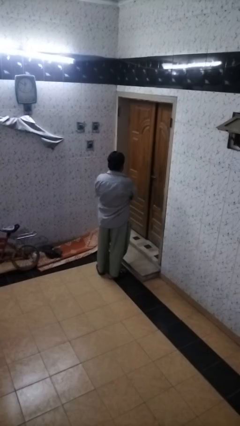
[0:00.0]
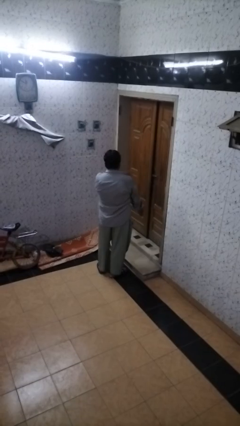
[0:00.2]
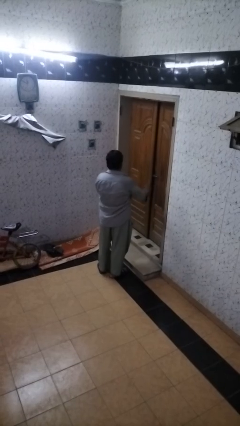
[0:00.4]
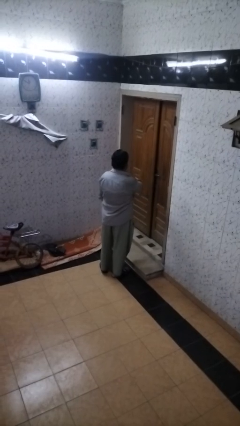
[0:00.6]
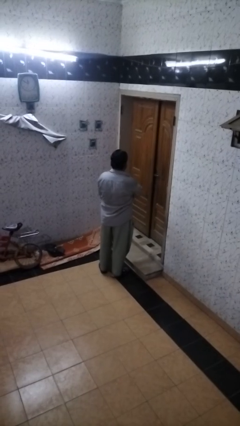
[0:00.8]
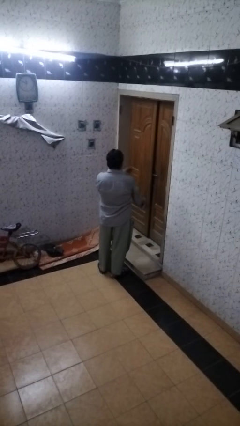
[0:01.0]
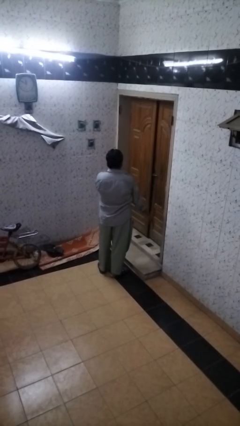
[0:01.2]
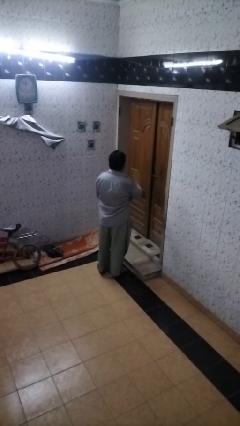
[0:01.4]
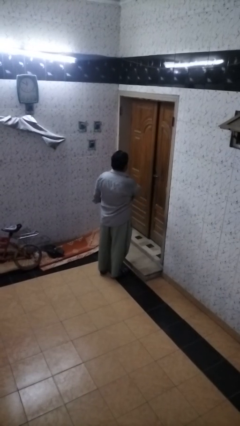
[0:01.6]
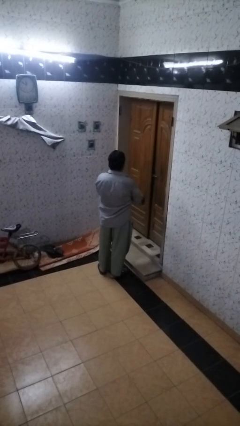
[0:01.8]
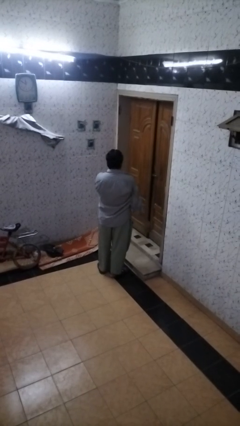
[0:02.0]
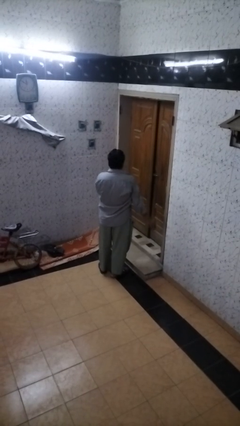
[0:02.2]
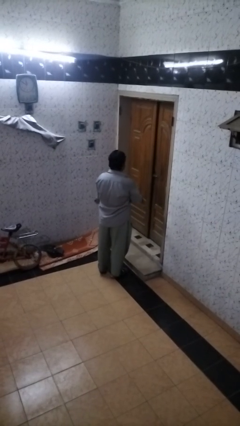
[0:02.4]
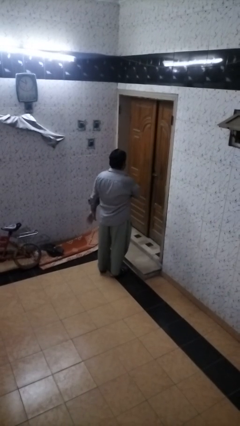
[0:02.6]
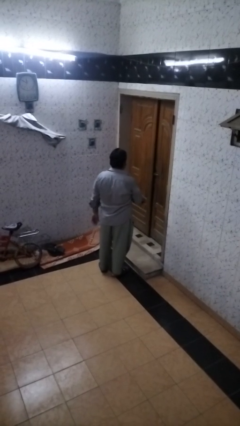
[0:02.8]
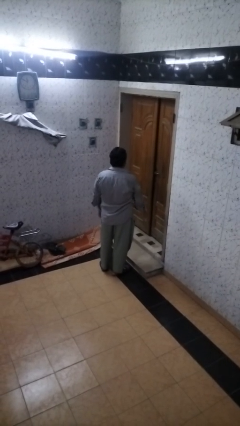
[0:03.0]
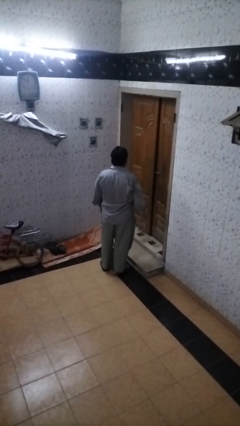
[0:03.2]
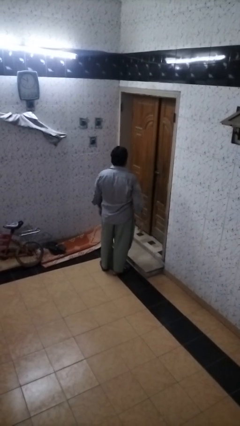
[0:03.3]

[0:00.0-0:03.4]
person drums on chest

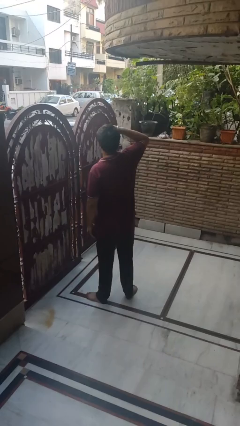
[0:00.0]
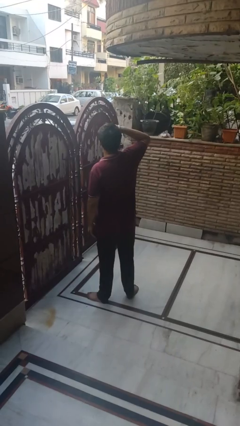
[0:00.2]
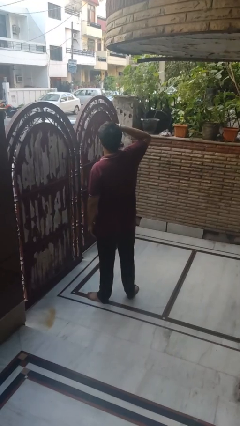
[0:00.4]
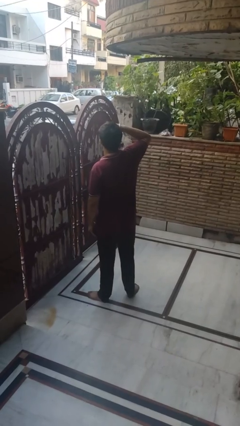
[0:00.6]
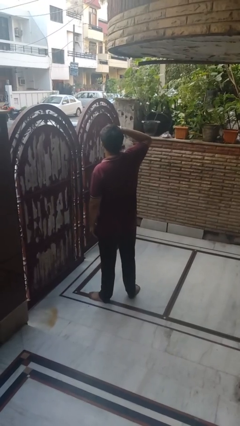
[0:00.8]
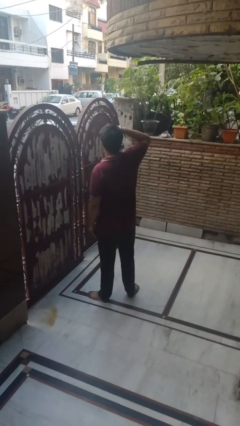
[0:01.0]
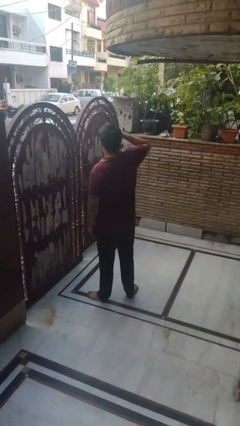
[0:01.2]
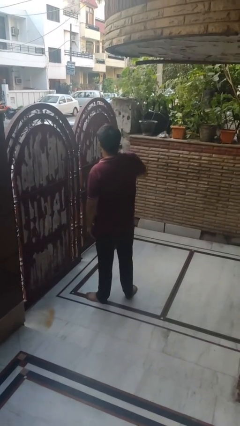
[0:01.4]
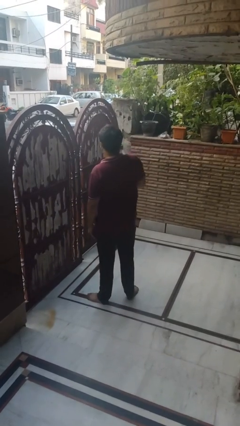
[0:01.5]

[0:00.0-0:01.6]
person shades eyes

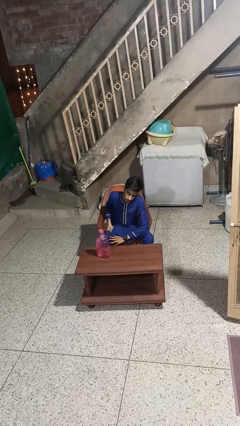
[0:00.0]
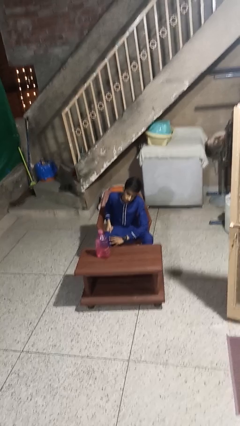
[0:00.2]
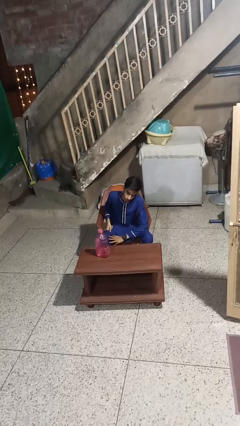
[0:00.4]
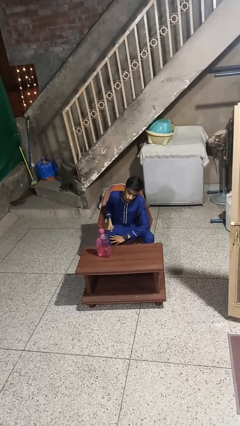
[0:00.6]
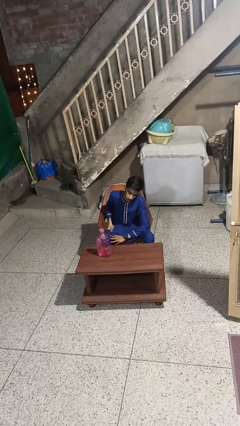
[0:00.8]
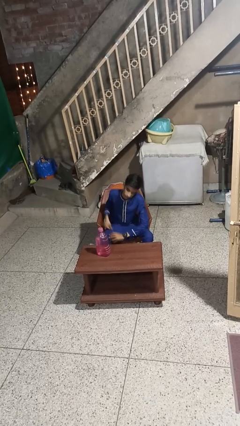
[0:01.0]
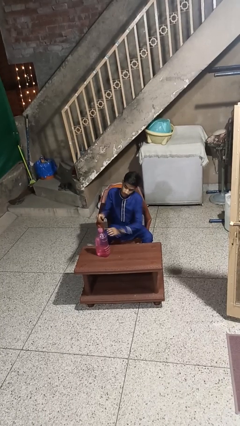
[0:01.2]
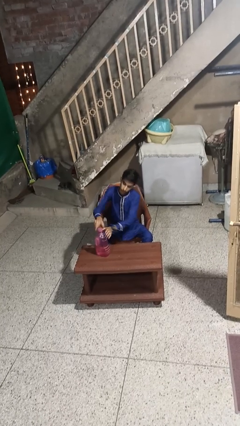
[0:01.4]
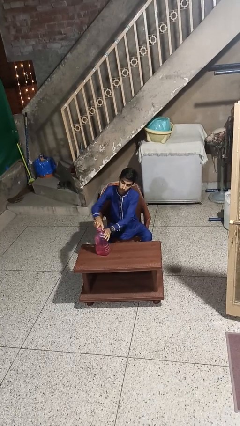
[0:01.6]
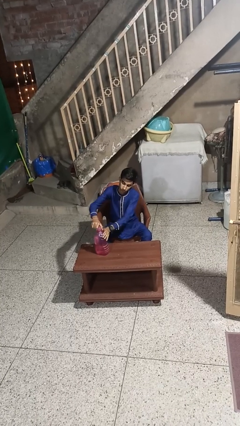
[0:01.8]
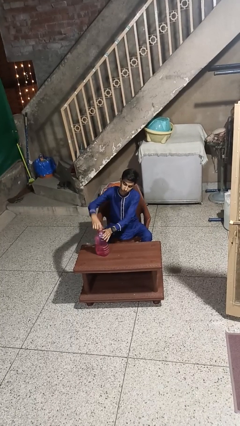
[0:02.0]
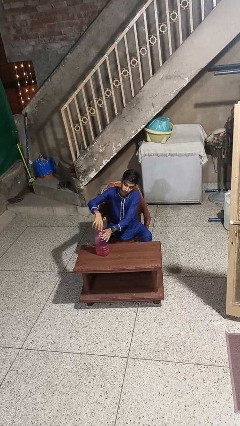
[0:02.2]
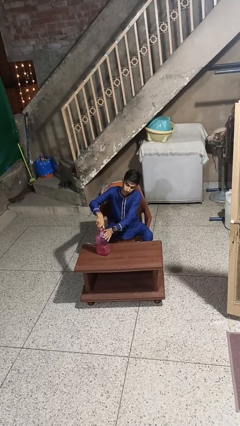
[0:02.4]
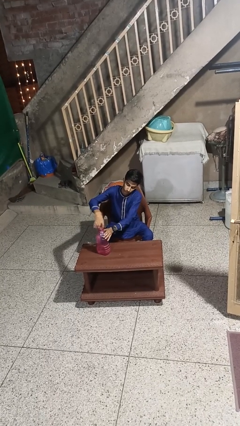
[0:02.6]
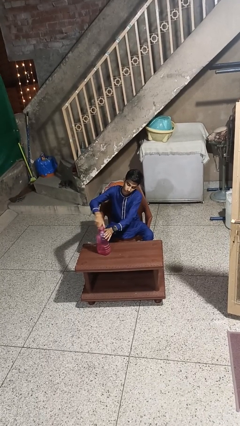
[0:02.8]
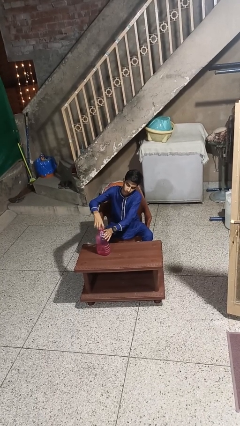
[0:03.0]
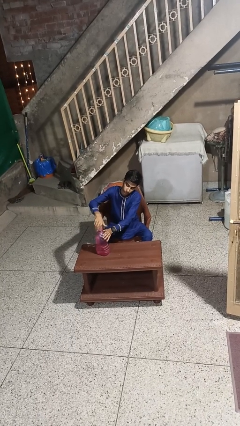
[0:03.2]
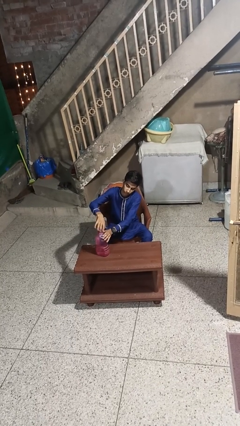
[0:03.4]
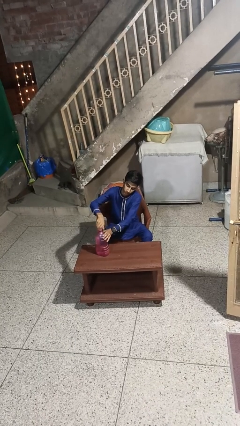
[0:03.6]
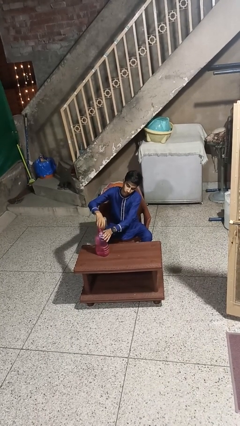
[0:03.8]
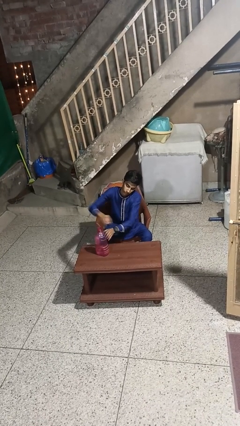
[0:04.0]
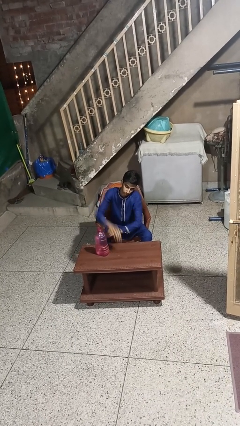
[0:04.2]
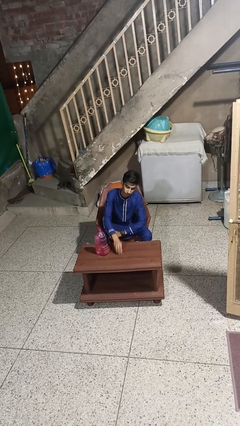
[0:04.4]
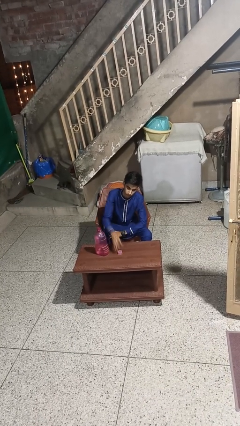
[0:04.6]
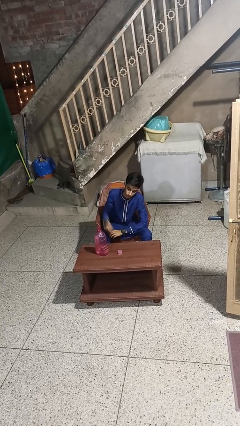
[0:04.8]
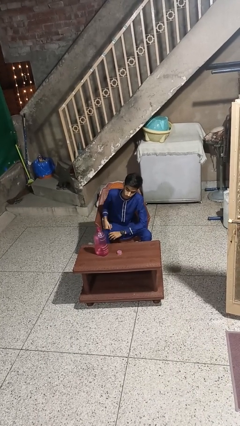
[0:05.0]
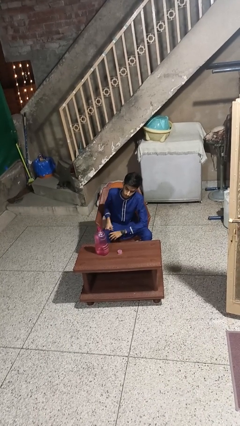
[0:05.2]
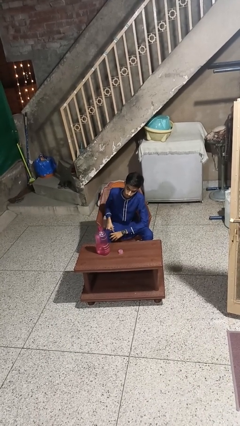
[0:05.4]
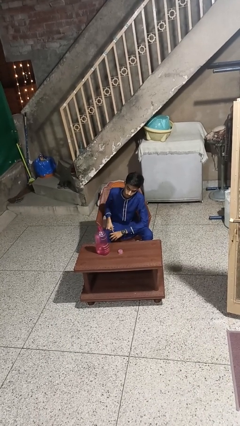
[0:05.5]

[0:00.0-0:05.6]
person unscrews lid from bottle

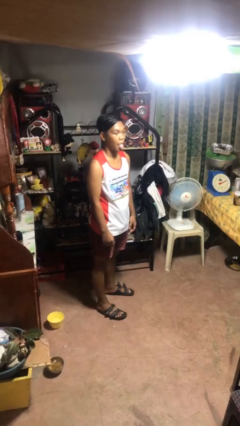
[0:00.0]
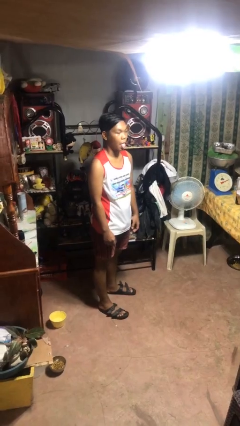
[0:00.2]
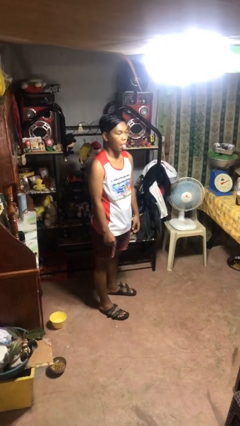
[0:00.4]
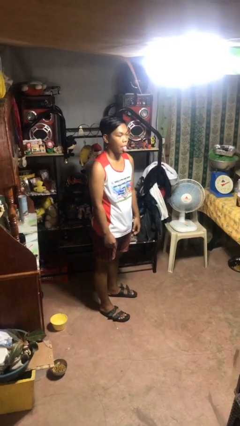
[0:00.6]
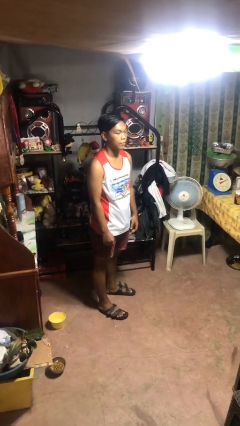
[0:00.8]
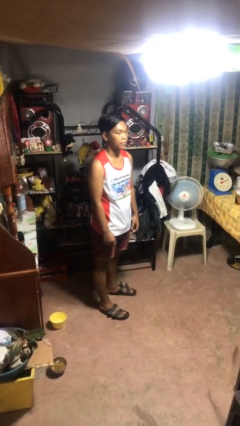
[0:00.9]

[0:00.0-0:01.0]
person sticks out tongue

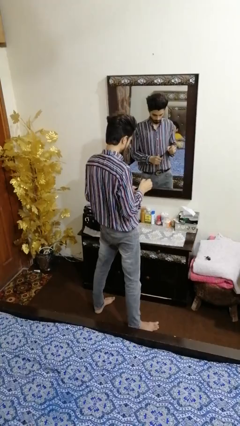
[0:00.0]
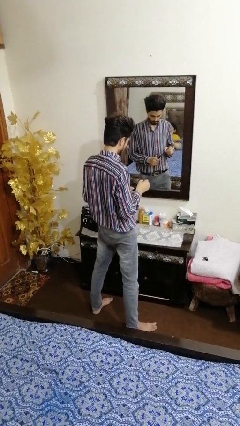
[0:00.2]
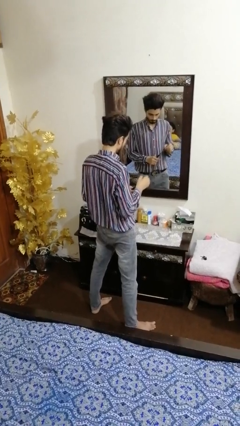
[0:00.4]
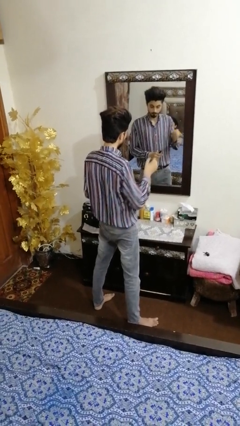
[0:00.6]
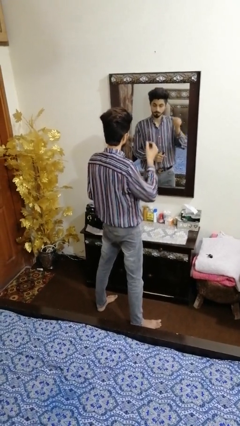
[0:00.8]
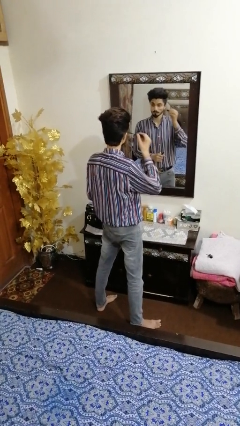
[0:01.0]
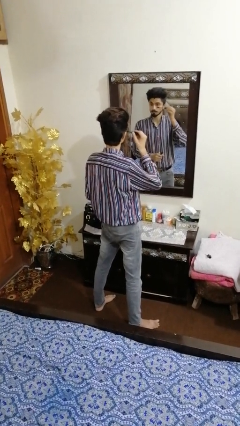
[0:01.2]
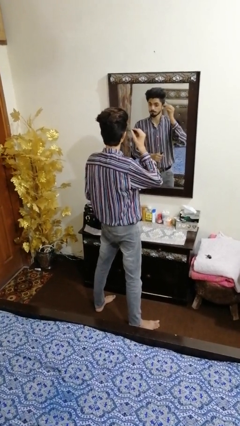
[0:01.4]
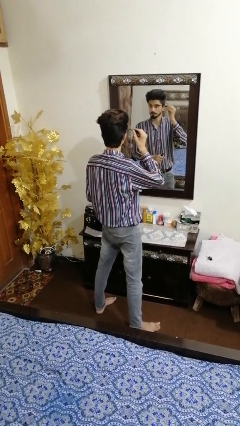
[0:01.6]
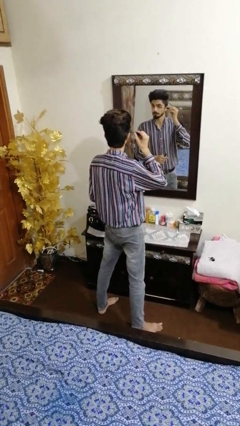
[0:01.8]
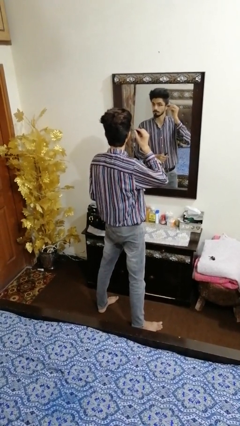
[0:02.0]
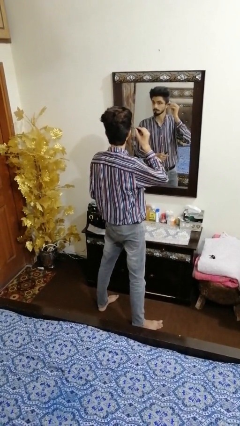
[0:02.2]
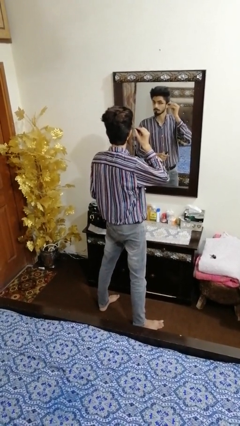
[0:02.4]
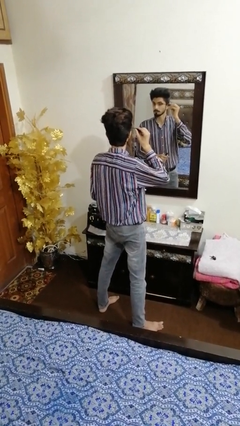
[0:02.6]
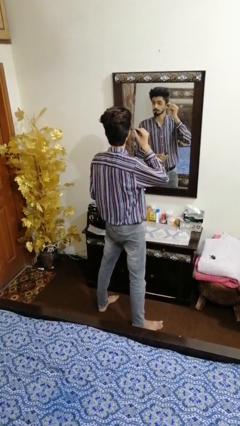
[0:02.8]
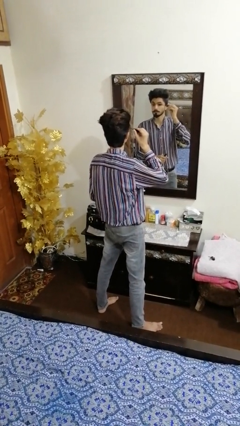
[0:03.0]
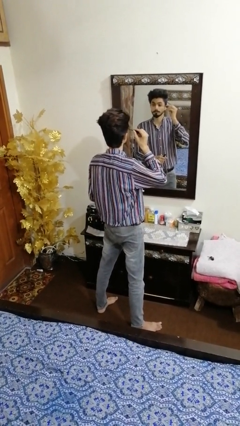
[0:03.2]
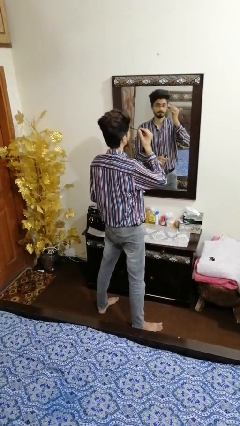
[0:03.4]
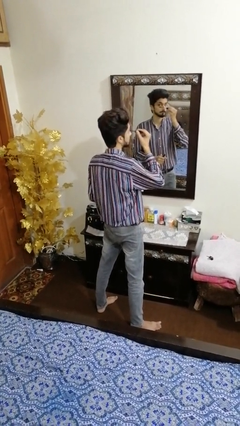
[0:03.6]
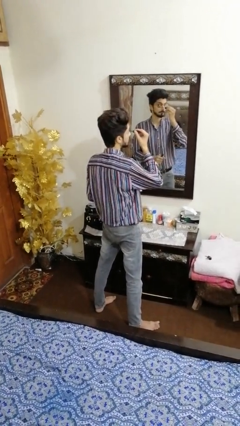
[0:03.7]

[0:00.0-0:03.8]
person applies eye makeup

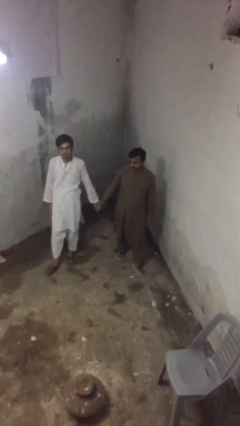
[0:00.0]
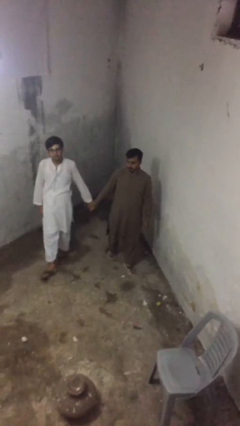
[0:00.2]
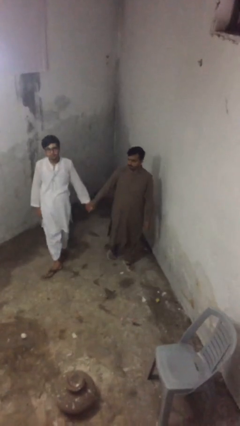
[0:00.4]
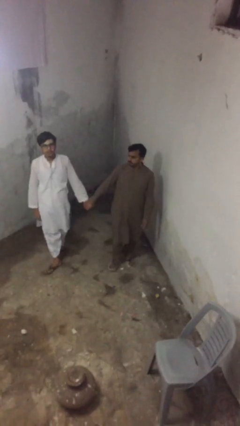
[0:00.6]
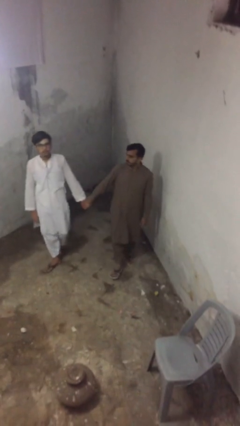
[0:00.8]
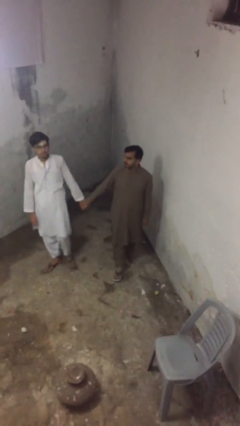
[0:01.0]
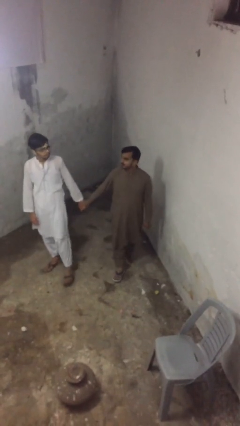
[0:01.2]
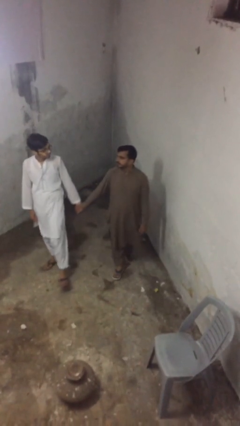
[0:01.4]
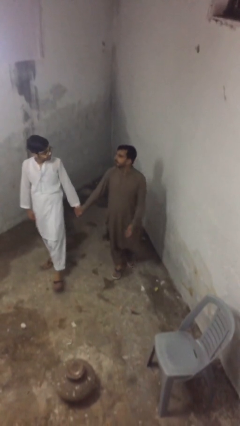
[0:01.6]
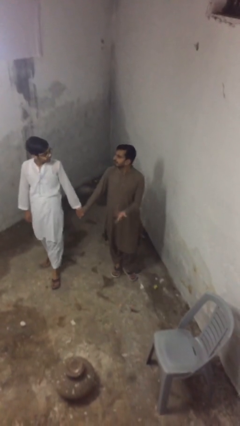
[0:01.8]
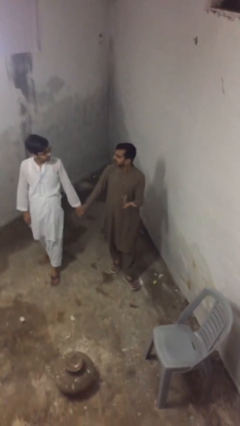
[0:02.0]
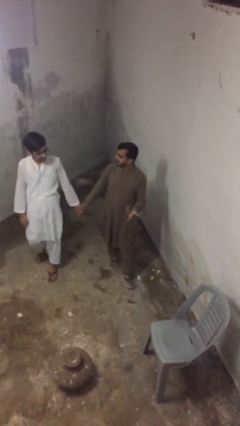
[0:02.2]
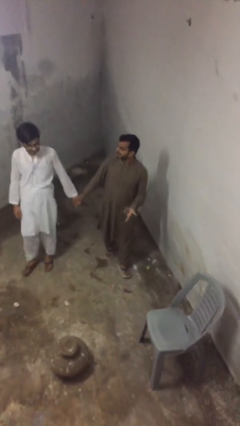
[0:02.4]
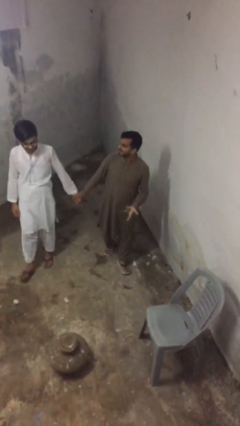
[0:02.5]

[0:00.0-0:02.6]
person holds hand
